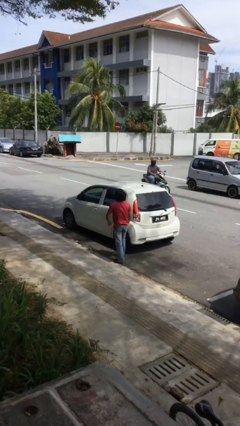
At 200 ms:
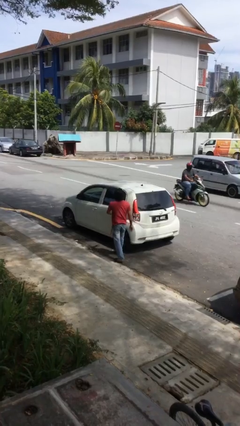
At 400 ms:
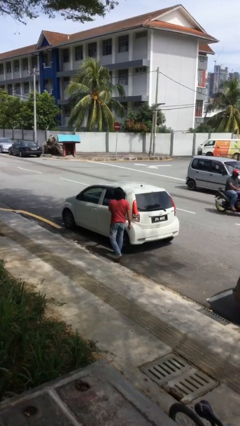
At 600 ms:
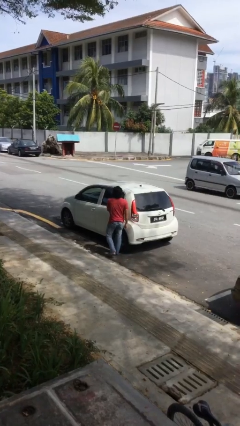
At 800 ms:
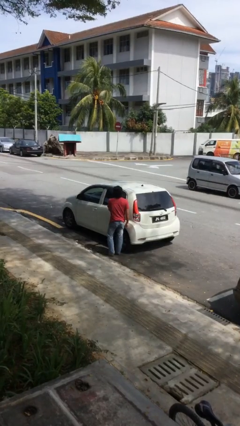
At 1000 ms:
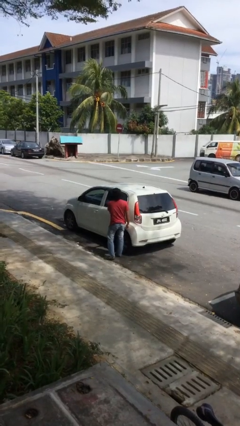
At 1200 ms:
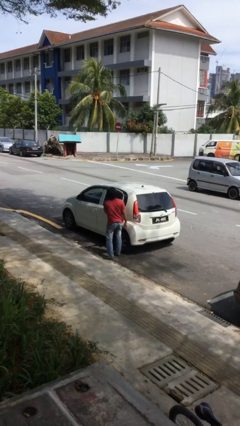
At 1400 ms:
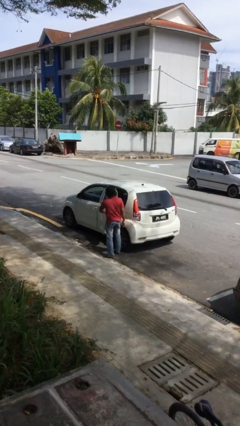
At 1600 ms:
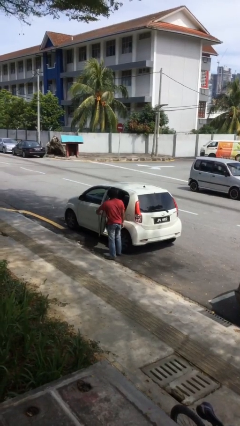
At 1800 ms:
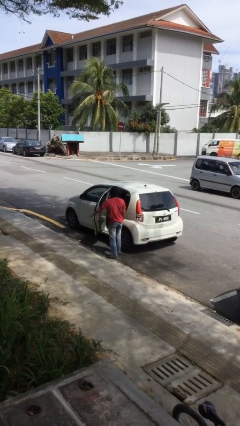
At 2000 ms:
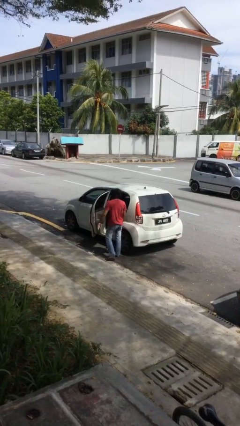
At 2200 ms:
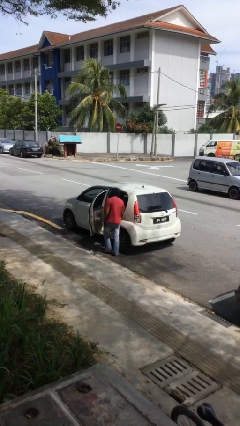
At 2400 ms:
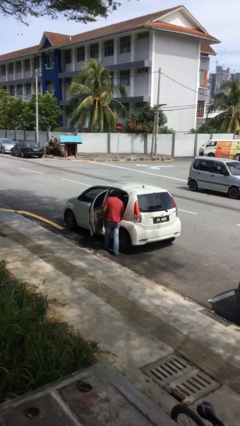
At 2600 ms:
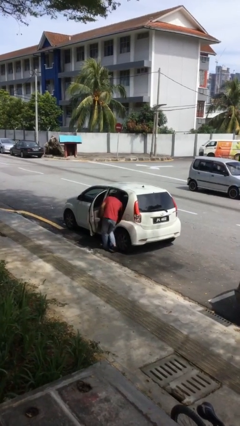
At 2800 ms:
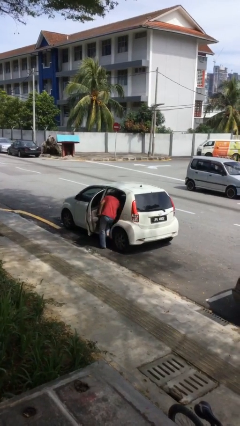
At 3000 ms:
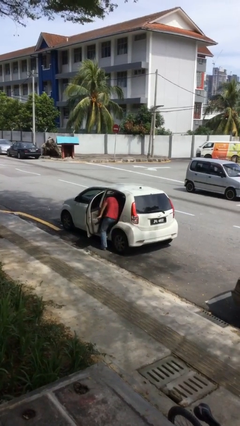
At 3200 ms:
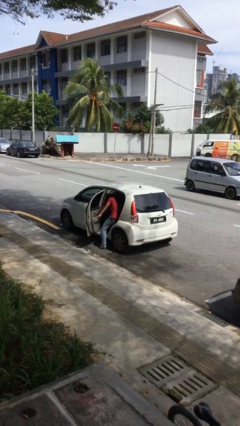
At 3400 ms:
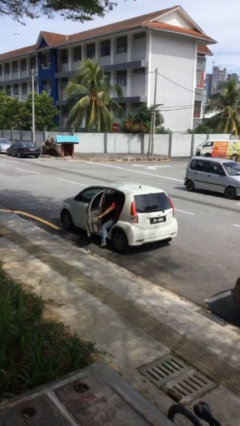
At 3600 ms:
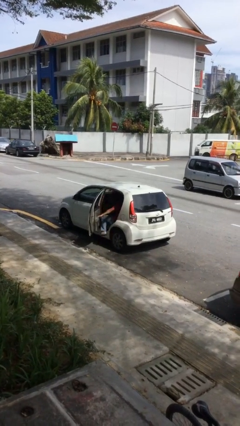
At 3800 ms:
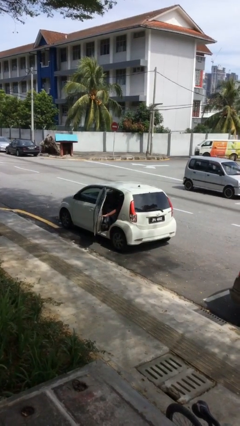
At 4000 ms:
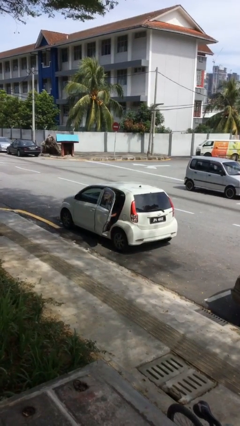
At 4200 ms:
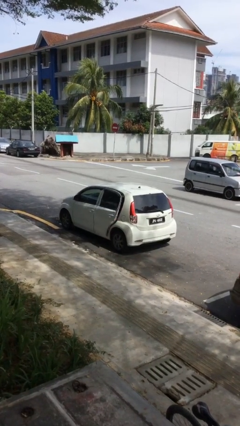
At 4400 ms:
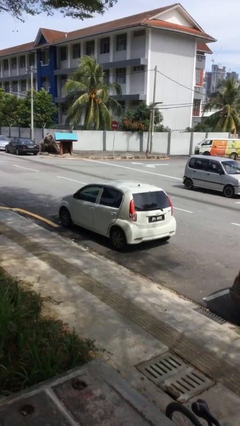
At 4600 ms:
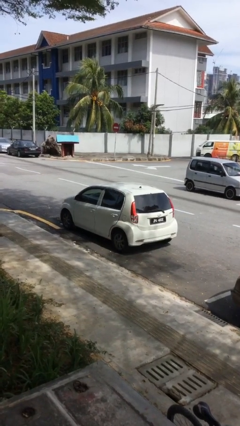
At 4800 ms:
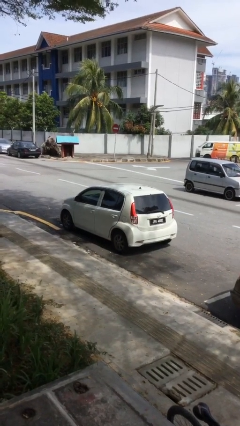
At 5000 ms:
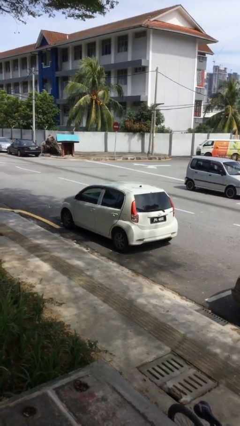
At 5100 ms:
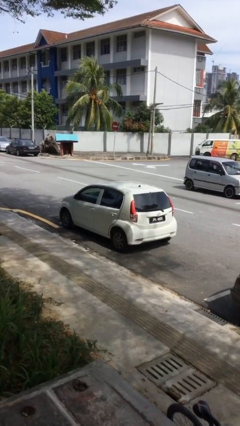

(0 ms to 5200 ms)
car picks up person

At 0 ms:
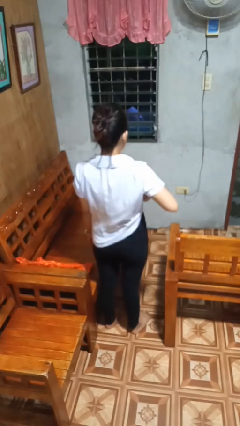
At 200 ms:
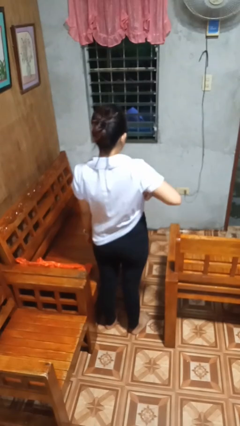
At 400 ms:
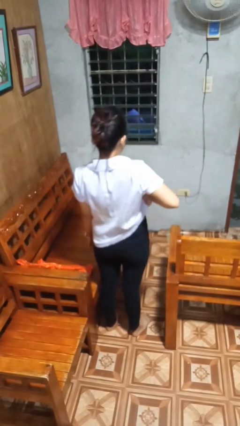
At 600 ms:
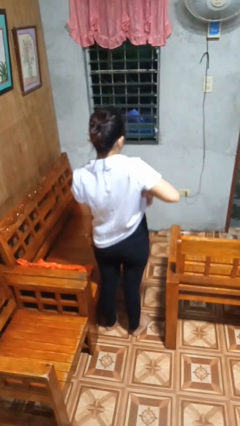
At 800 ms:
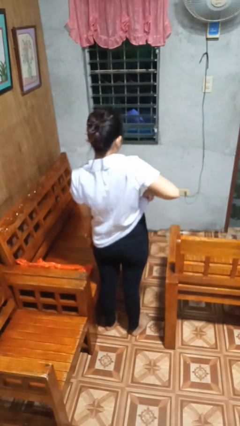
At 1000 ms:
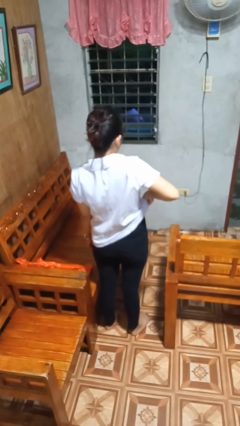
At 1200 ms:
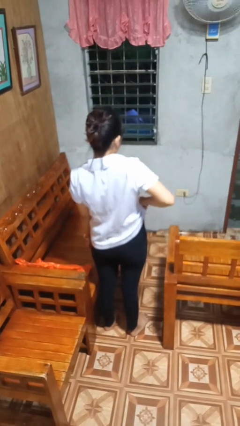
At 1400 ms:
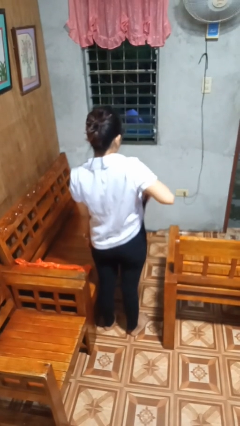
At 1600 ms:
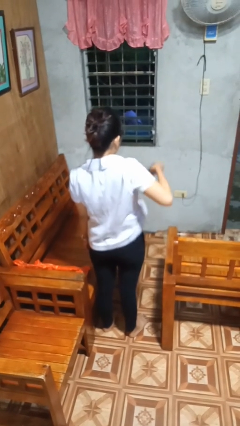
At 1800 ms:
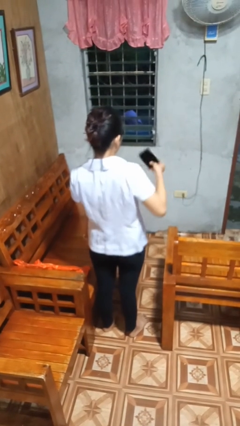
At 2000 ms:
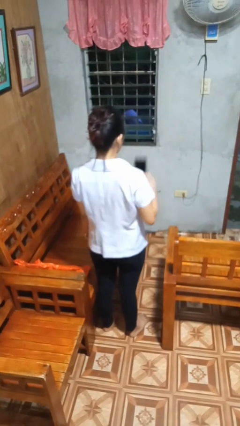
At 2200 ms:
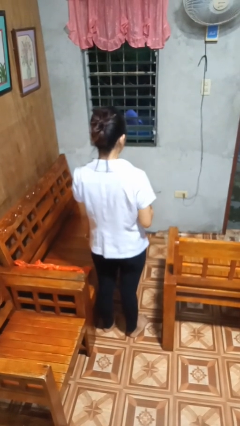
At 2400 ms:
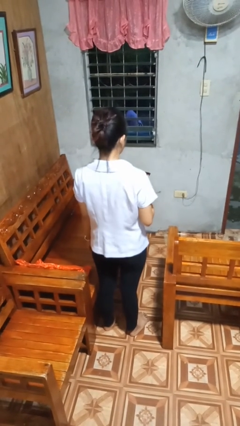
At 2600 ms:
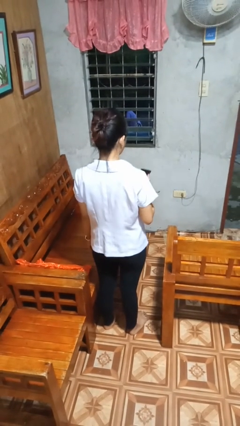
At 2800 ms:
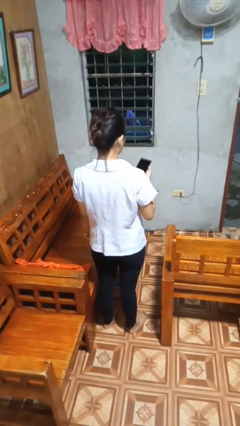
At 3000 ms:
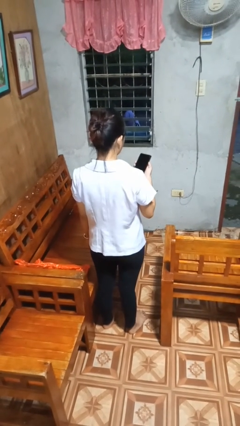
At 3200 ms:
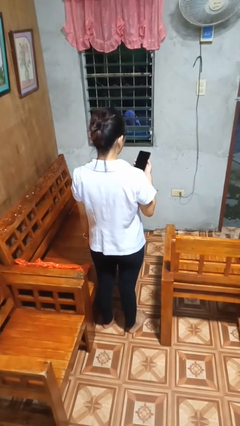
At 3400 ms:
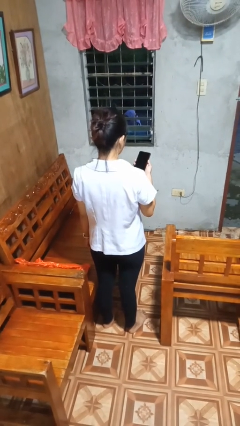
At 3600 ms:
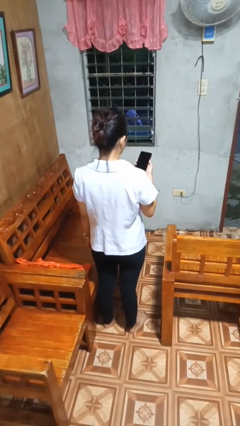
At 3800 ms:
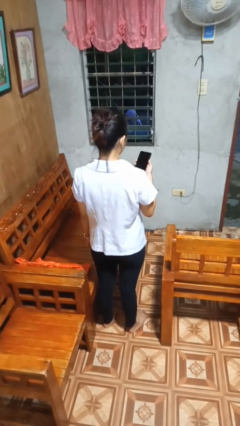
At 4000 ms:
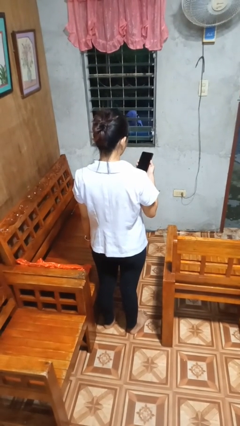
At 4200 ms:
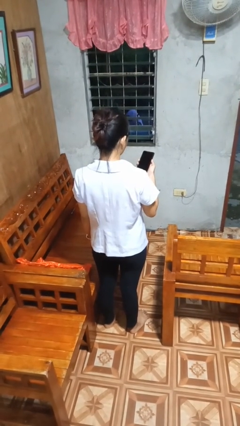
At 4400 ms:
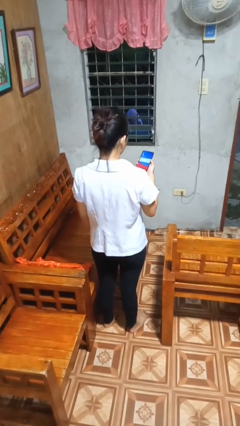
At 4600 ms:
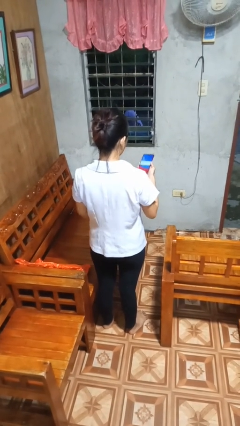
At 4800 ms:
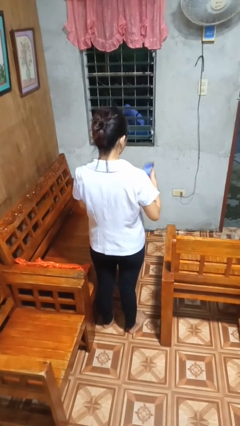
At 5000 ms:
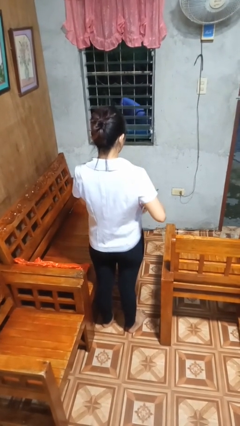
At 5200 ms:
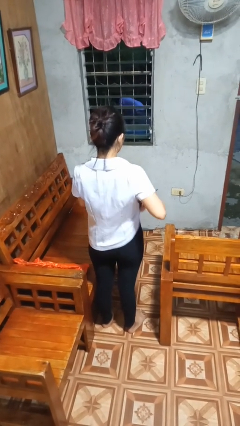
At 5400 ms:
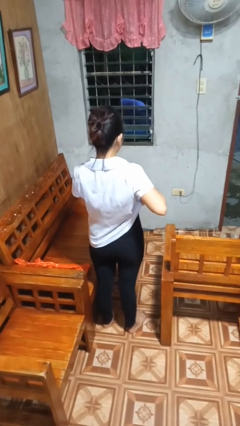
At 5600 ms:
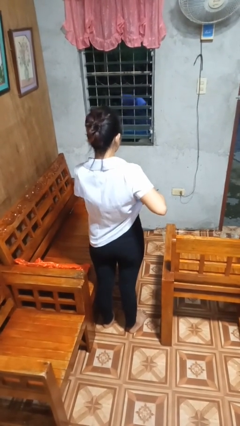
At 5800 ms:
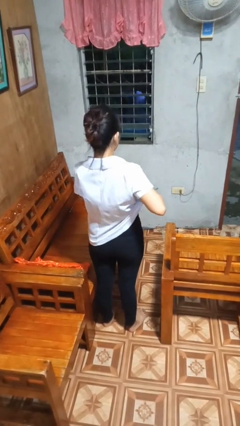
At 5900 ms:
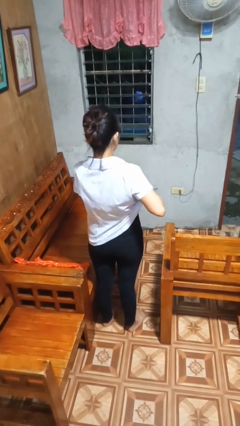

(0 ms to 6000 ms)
person takes phone from pocket

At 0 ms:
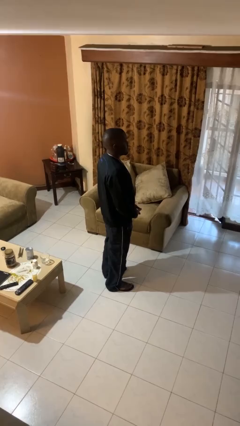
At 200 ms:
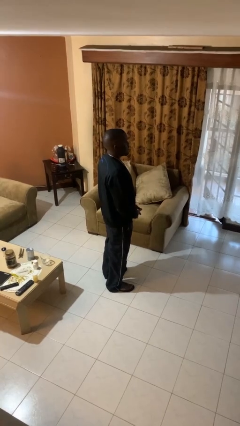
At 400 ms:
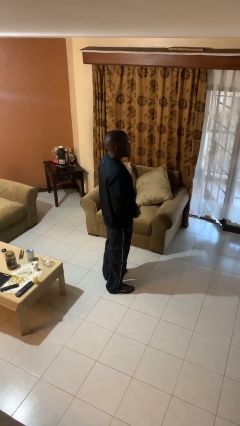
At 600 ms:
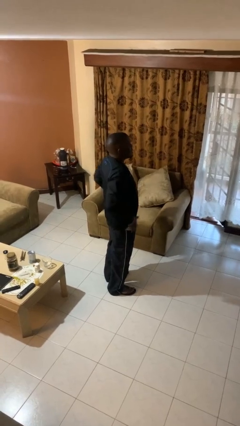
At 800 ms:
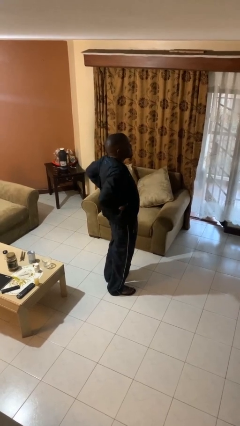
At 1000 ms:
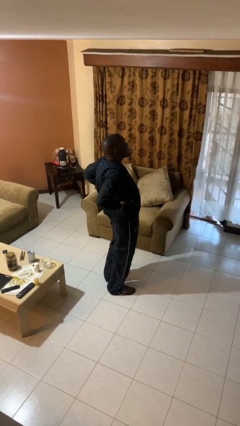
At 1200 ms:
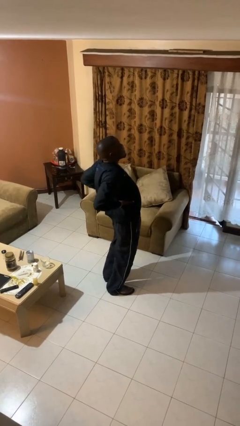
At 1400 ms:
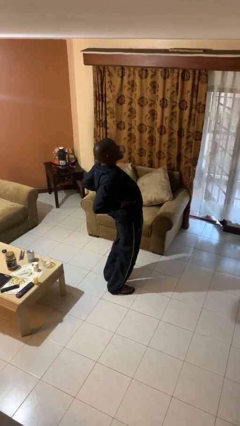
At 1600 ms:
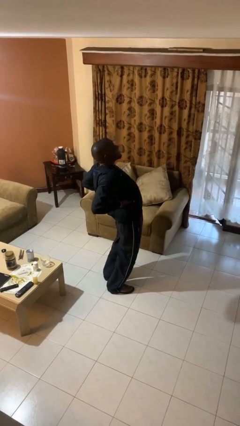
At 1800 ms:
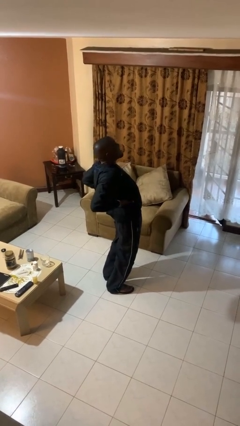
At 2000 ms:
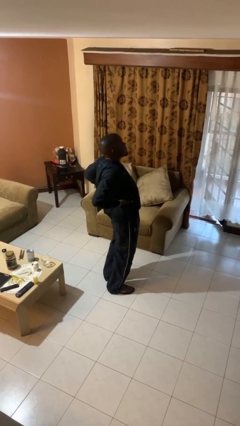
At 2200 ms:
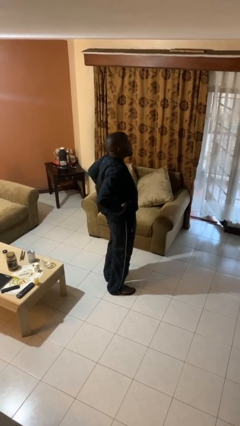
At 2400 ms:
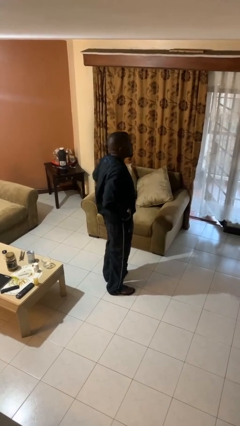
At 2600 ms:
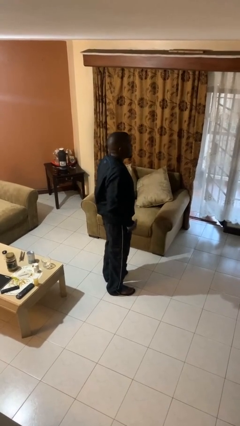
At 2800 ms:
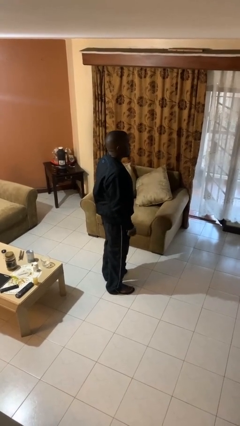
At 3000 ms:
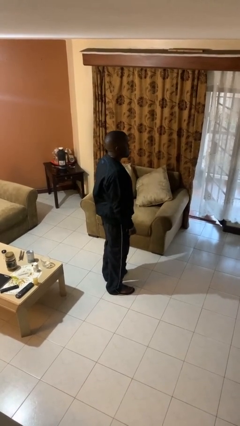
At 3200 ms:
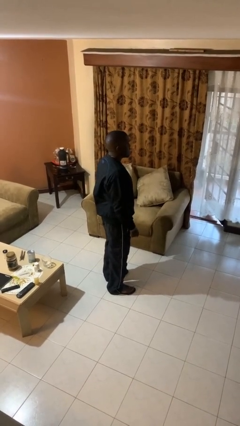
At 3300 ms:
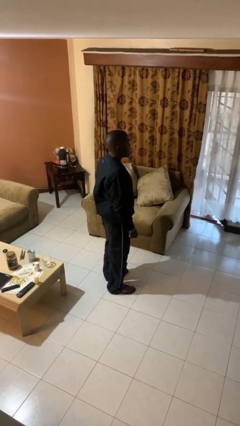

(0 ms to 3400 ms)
person stretches back

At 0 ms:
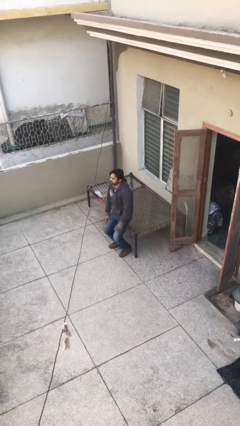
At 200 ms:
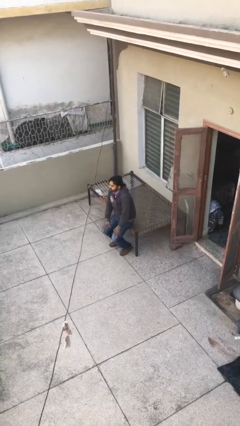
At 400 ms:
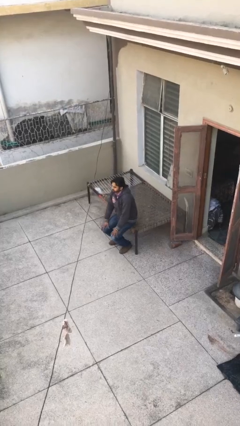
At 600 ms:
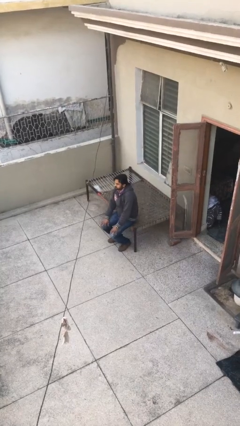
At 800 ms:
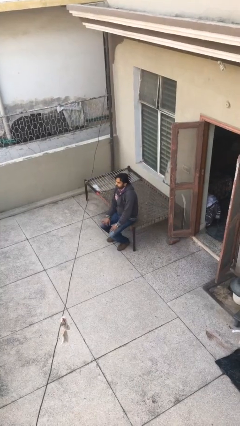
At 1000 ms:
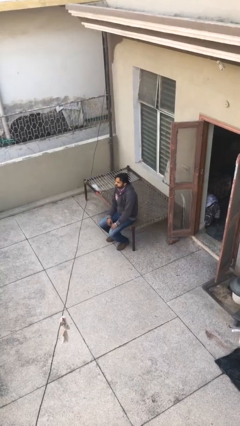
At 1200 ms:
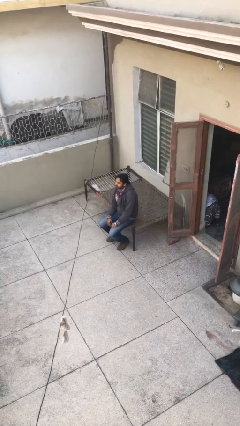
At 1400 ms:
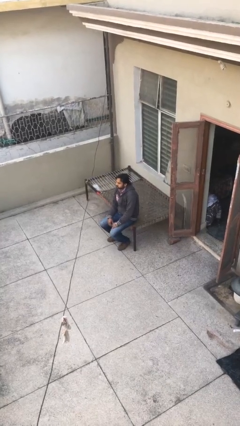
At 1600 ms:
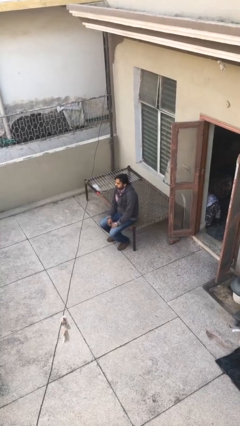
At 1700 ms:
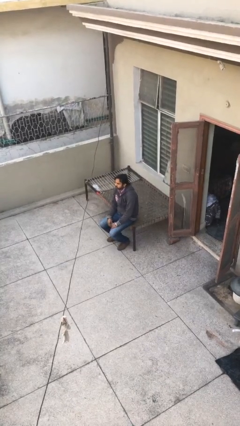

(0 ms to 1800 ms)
person sits down

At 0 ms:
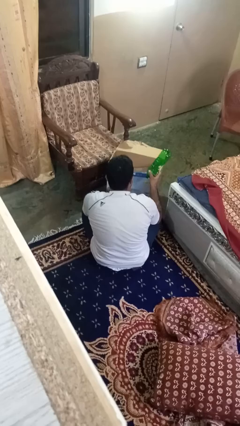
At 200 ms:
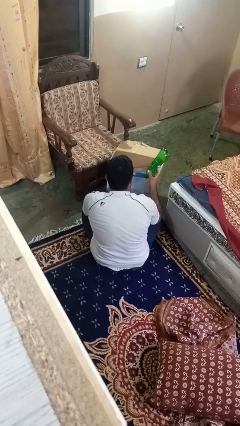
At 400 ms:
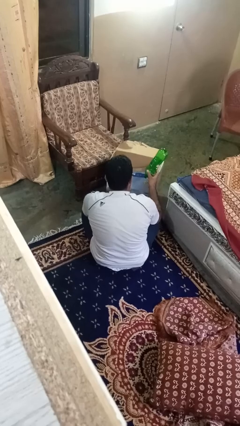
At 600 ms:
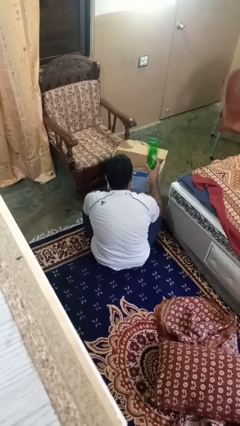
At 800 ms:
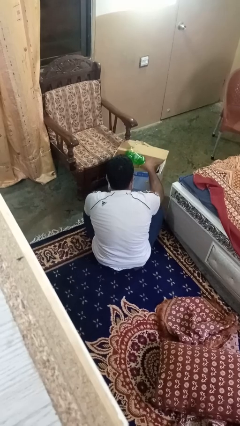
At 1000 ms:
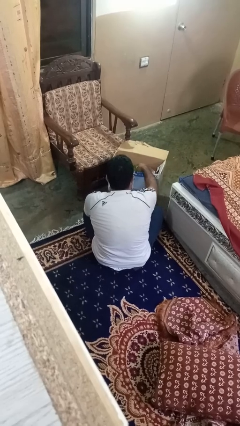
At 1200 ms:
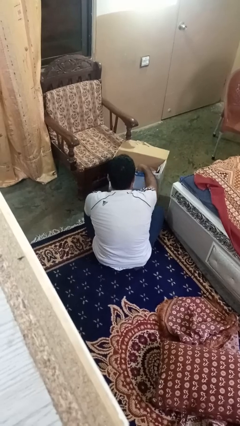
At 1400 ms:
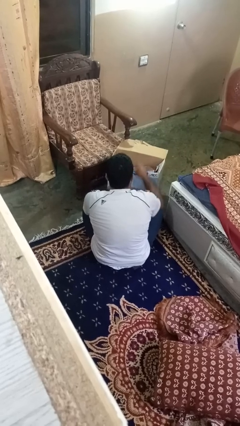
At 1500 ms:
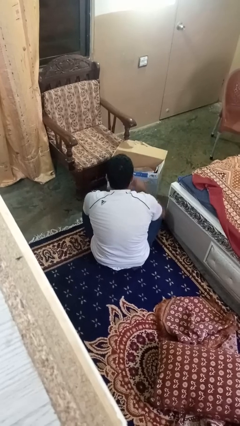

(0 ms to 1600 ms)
person puts object into box
